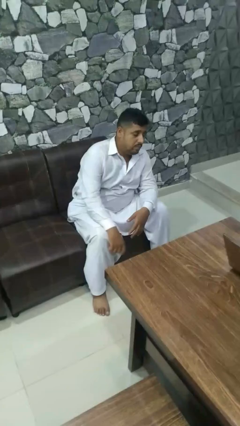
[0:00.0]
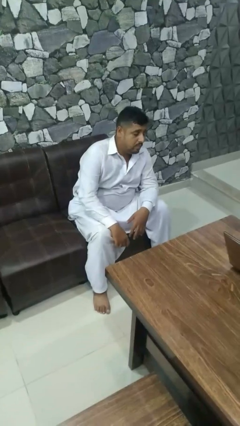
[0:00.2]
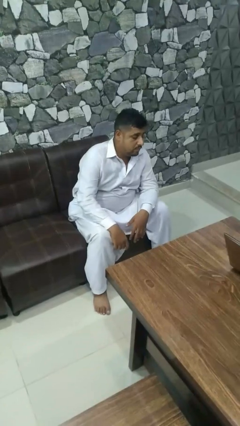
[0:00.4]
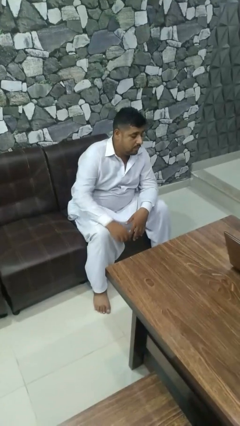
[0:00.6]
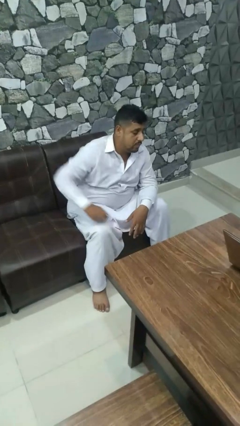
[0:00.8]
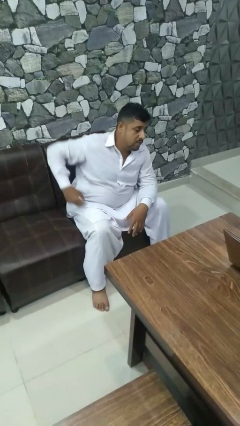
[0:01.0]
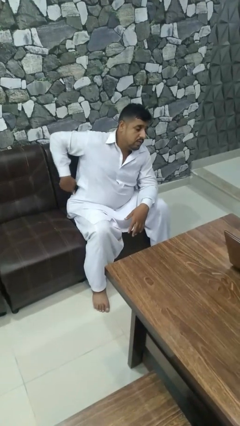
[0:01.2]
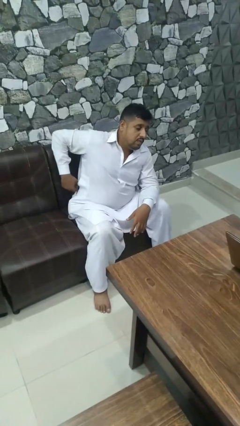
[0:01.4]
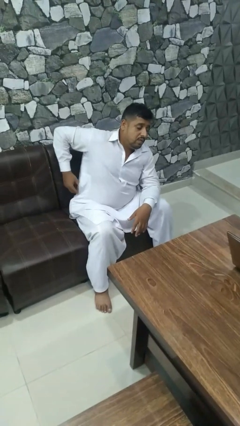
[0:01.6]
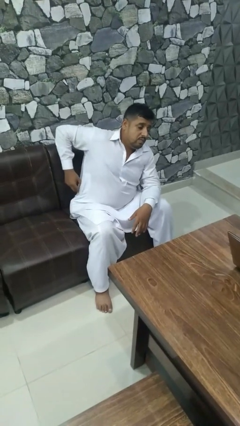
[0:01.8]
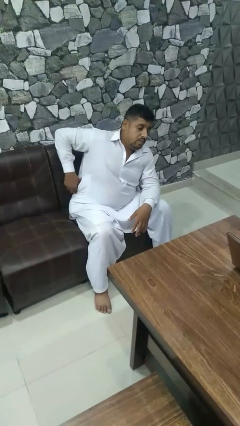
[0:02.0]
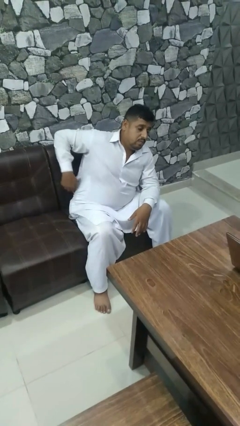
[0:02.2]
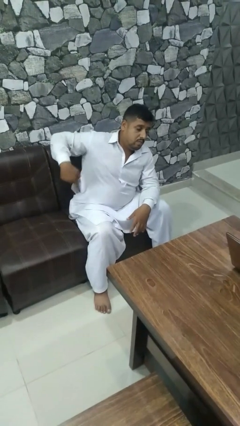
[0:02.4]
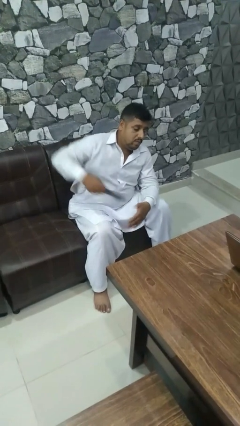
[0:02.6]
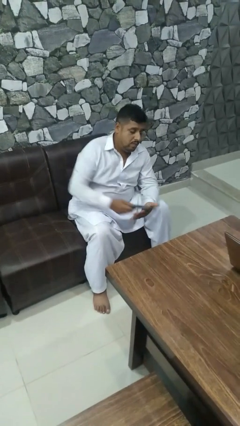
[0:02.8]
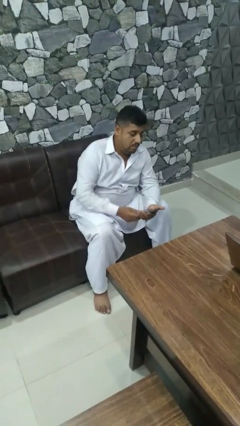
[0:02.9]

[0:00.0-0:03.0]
person takes phone from pocket

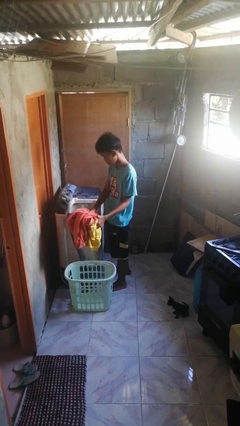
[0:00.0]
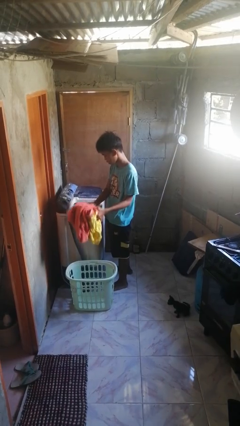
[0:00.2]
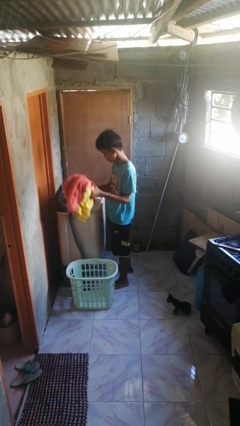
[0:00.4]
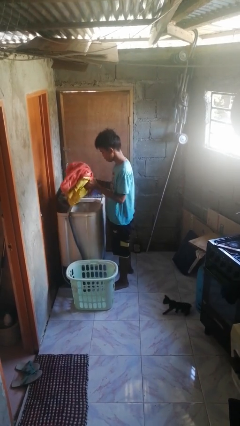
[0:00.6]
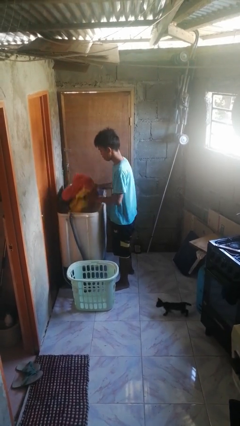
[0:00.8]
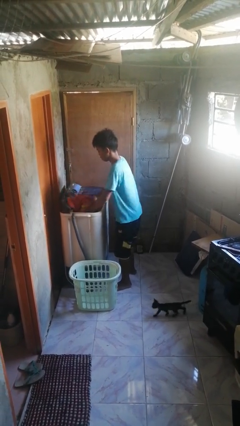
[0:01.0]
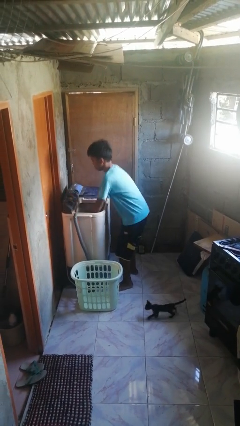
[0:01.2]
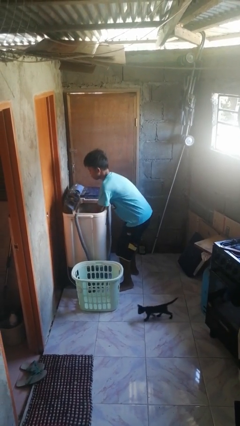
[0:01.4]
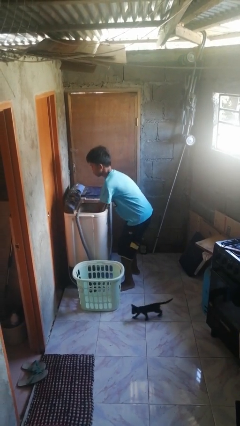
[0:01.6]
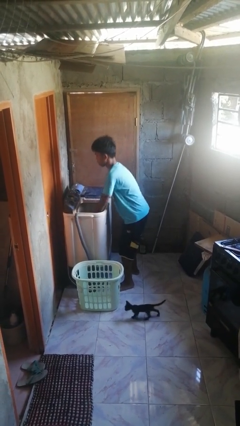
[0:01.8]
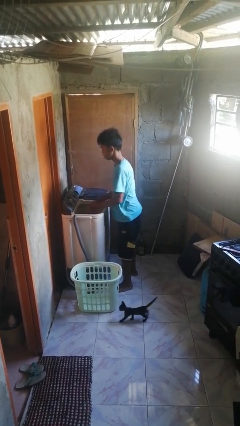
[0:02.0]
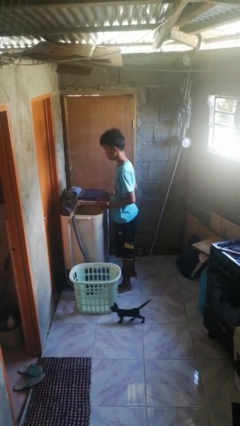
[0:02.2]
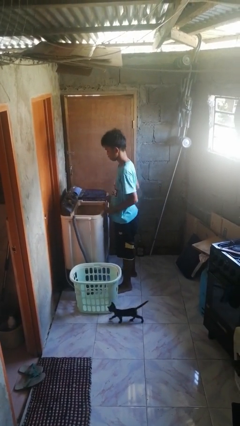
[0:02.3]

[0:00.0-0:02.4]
person loads clotheswasher

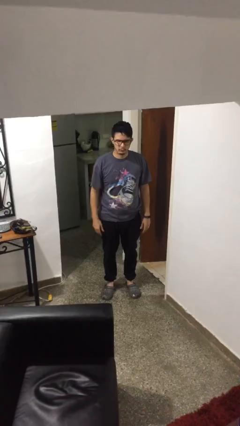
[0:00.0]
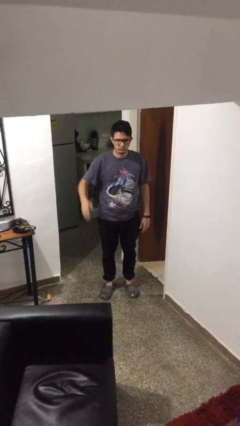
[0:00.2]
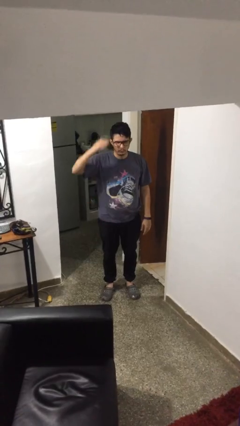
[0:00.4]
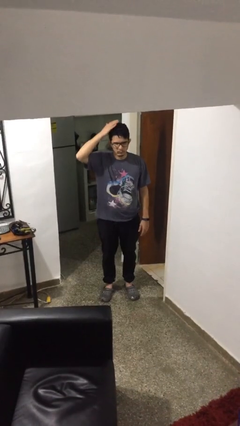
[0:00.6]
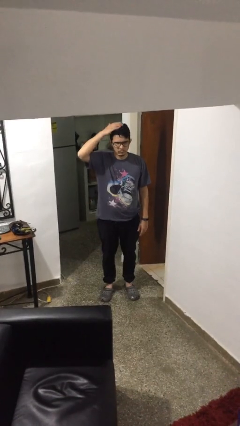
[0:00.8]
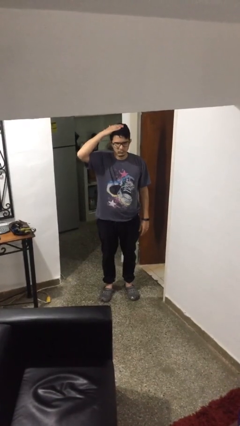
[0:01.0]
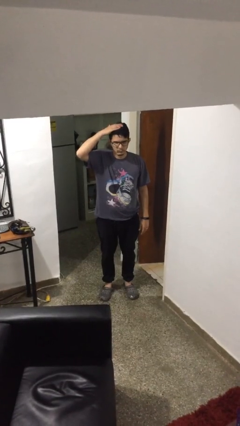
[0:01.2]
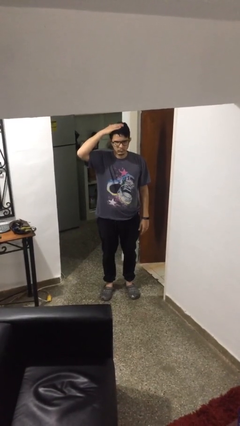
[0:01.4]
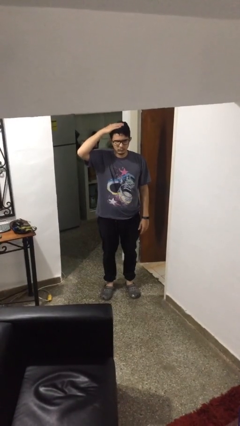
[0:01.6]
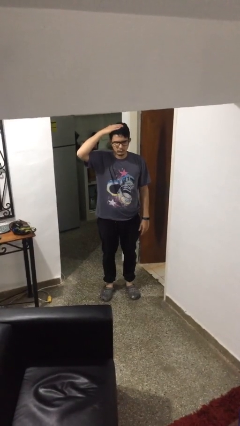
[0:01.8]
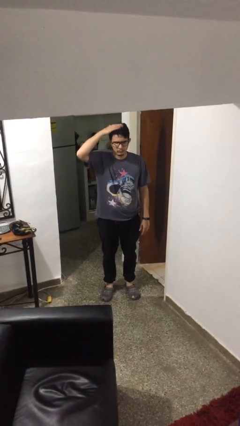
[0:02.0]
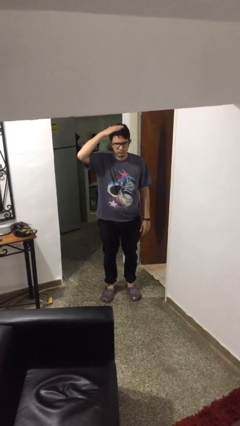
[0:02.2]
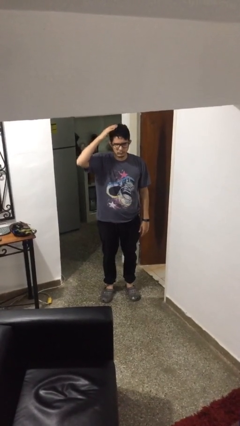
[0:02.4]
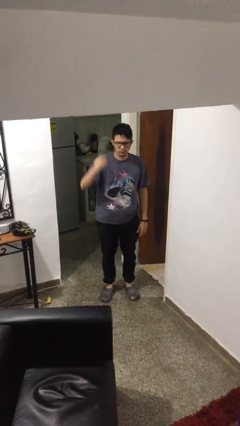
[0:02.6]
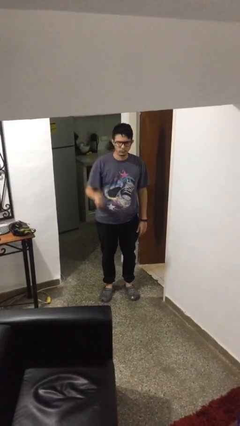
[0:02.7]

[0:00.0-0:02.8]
person pats head

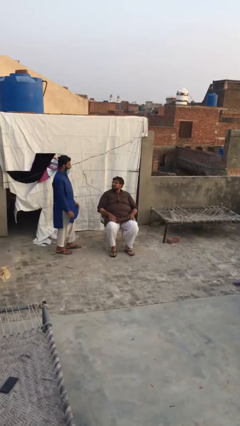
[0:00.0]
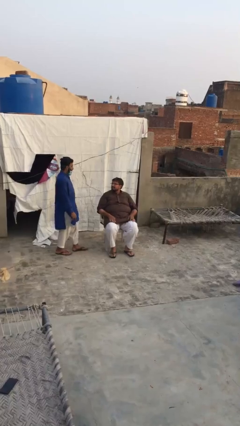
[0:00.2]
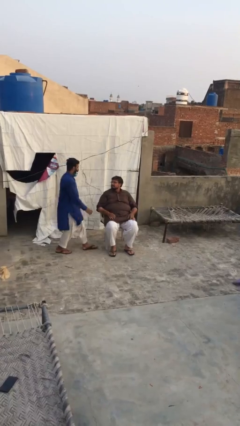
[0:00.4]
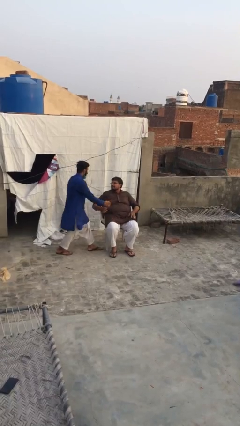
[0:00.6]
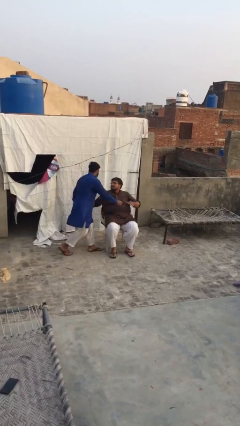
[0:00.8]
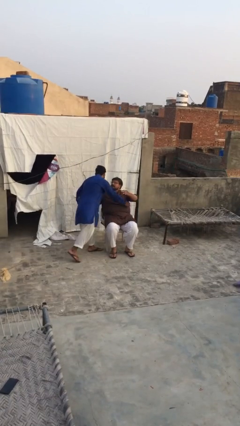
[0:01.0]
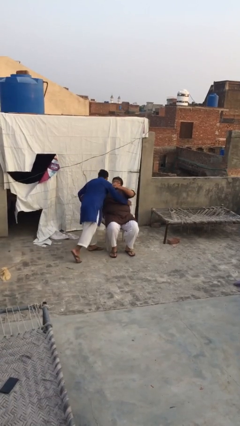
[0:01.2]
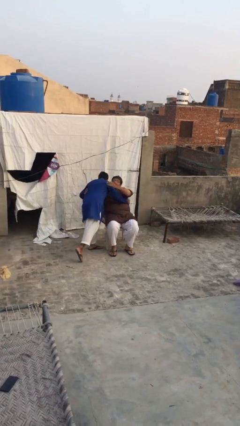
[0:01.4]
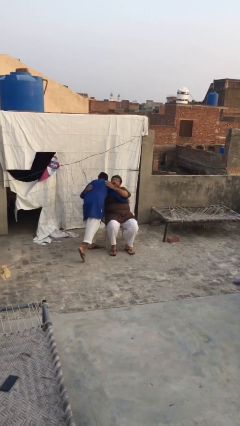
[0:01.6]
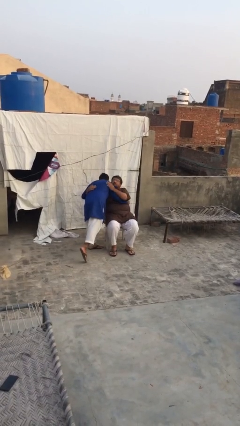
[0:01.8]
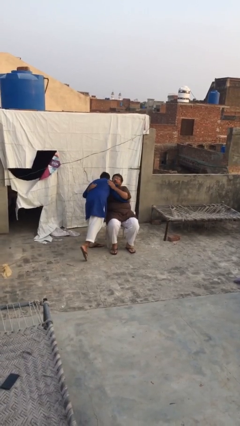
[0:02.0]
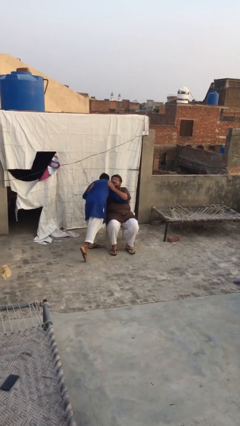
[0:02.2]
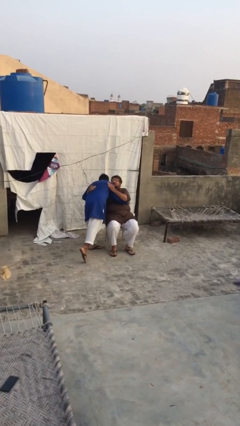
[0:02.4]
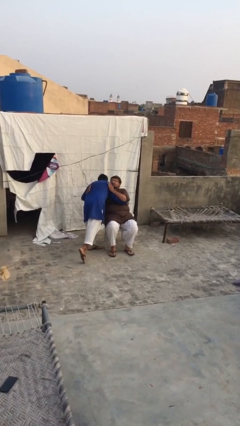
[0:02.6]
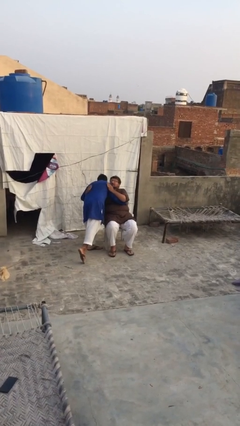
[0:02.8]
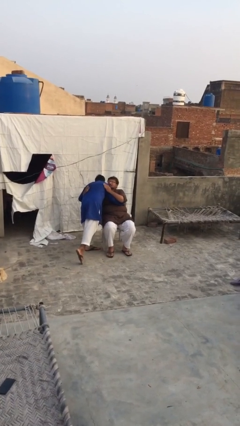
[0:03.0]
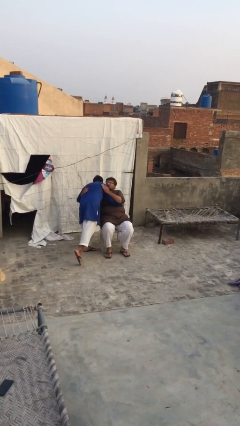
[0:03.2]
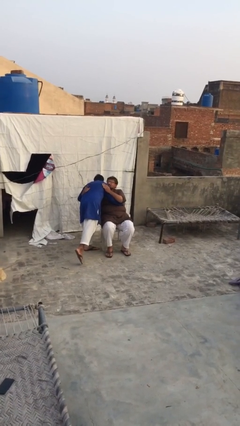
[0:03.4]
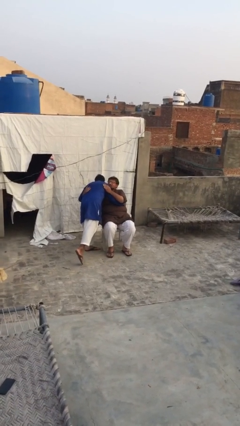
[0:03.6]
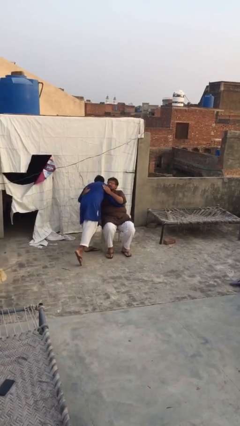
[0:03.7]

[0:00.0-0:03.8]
person embraces person

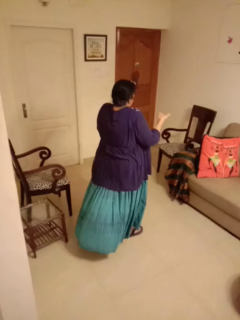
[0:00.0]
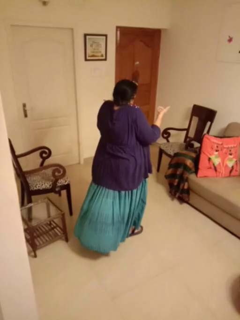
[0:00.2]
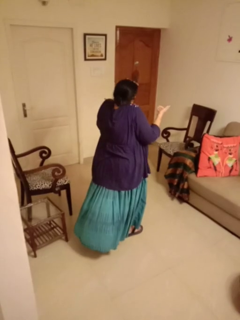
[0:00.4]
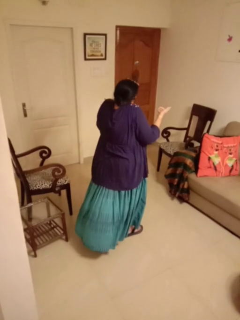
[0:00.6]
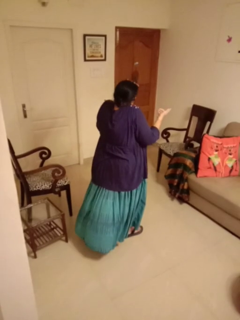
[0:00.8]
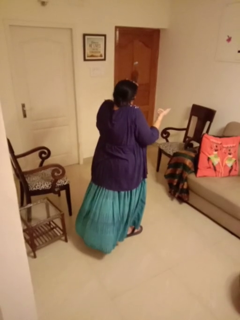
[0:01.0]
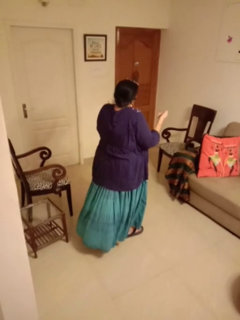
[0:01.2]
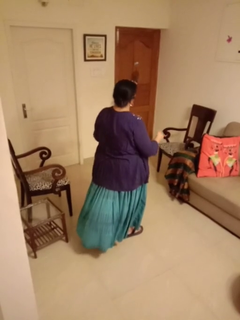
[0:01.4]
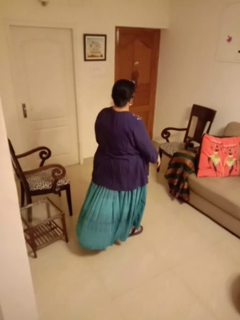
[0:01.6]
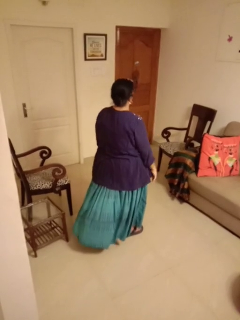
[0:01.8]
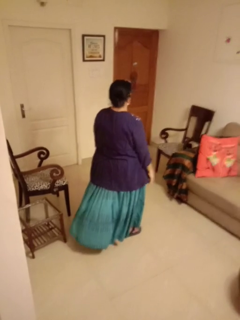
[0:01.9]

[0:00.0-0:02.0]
person shrugs

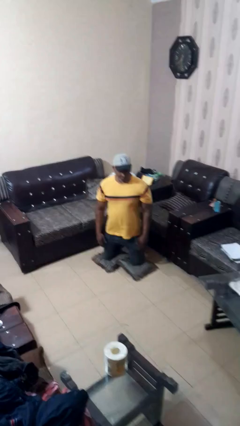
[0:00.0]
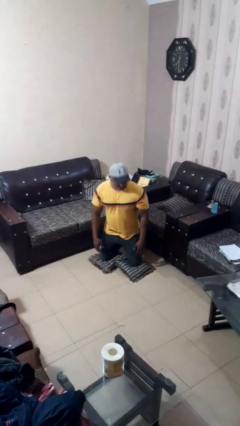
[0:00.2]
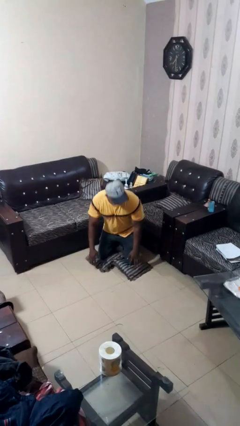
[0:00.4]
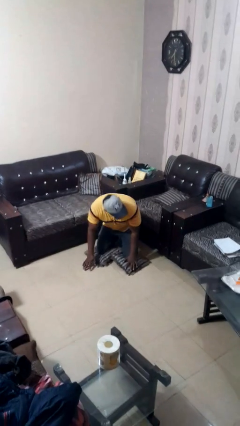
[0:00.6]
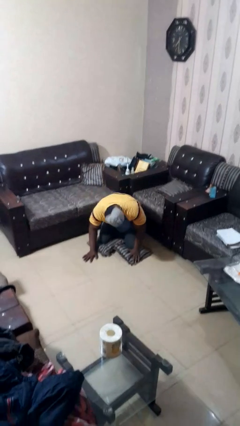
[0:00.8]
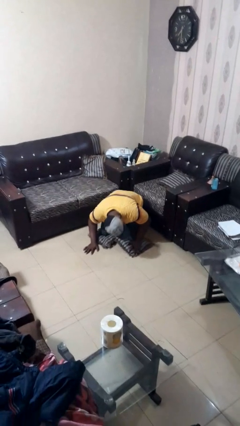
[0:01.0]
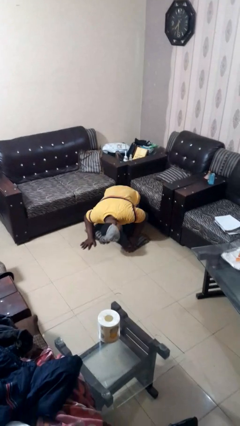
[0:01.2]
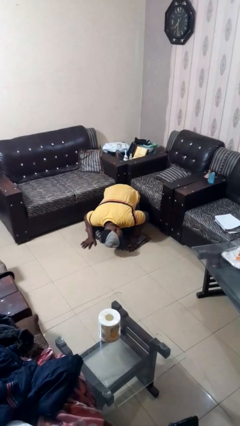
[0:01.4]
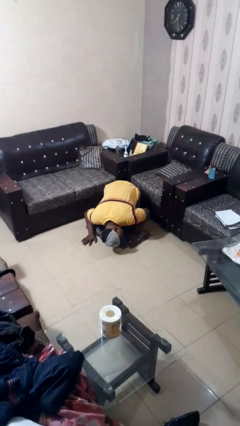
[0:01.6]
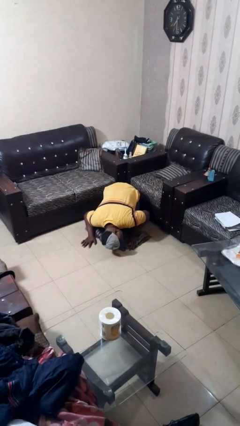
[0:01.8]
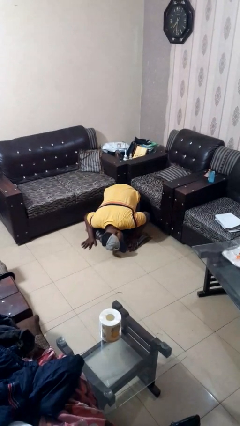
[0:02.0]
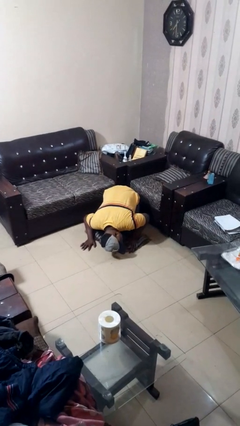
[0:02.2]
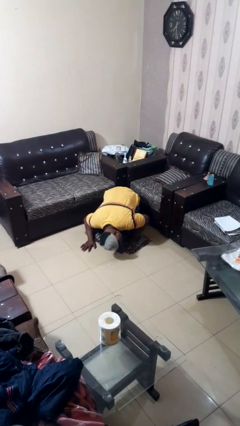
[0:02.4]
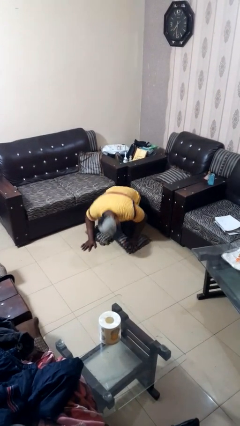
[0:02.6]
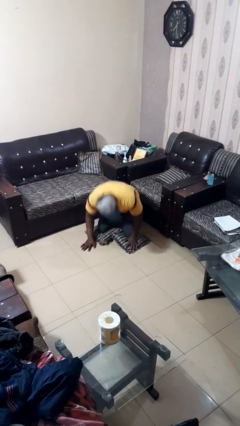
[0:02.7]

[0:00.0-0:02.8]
person searches under couch

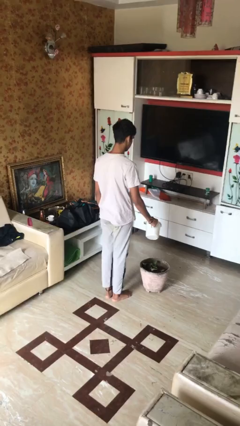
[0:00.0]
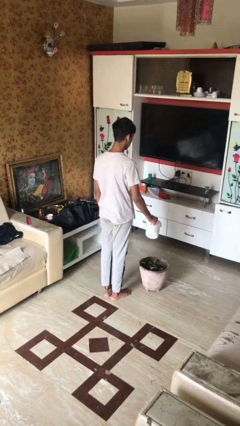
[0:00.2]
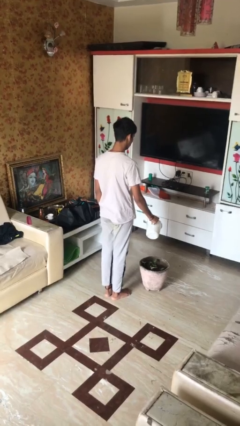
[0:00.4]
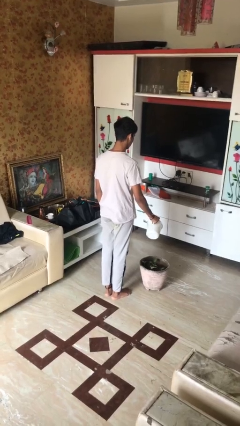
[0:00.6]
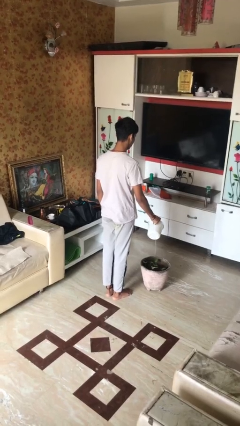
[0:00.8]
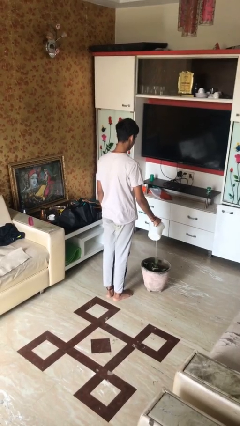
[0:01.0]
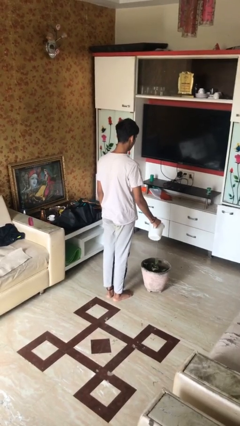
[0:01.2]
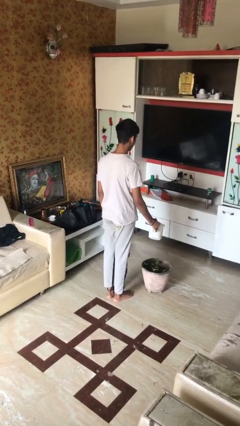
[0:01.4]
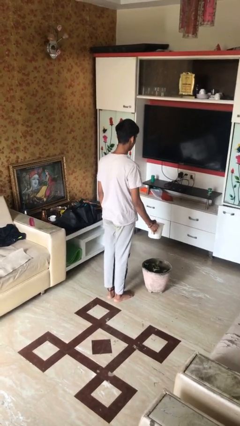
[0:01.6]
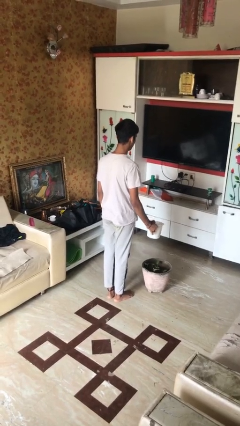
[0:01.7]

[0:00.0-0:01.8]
person waters houseplant
